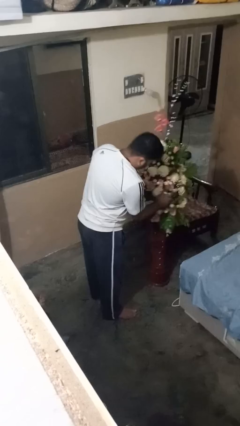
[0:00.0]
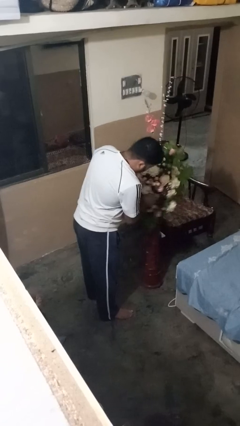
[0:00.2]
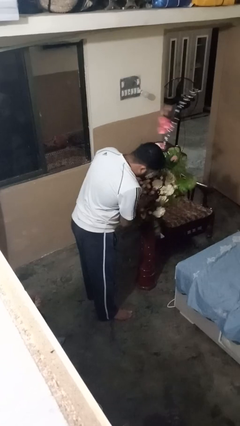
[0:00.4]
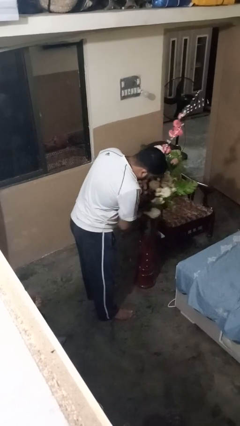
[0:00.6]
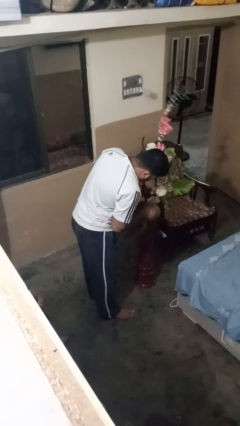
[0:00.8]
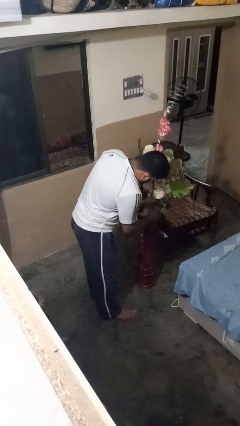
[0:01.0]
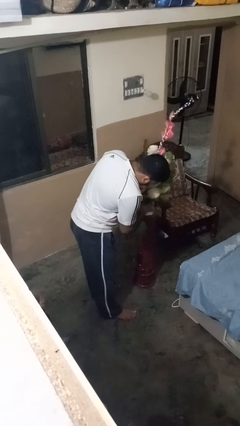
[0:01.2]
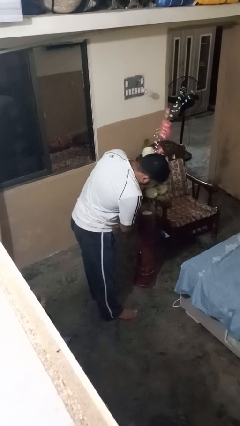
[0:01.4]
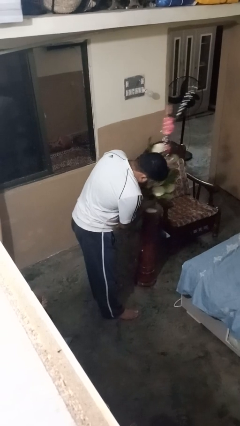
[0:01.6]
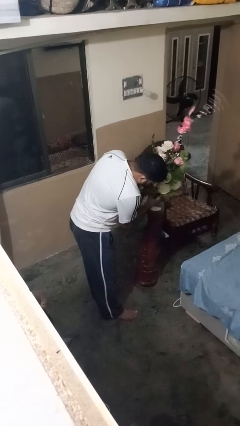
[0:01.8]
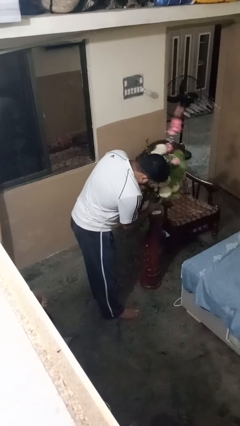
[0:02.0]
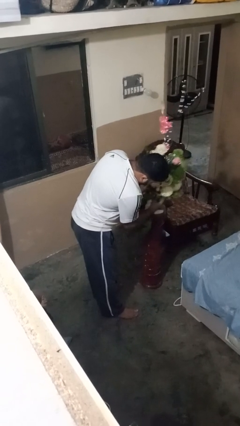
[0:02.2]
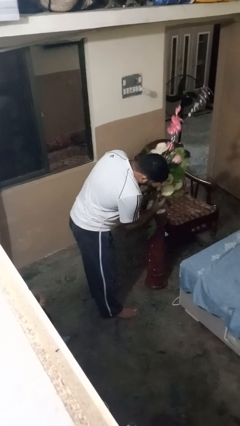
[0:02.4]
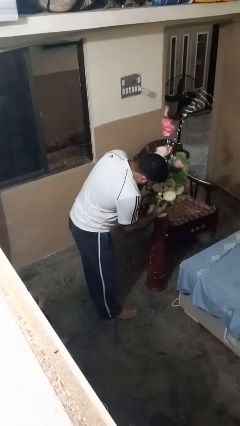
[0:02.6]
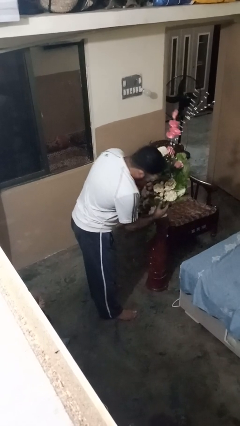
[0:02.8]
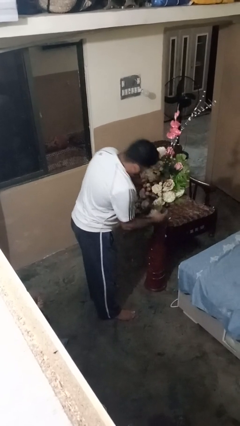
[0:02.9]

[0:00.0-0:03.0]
person arranges flowers in vase

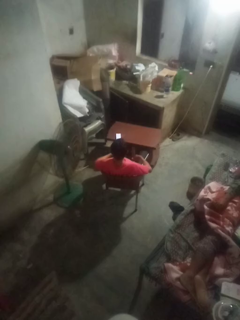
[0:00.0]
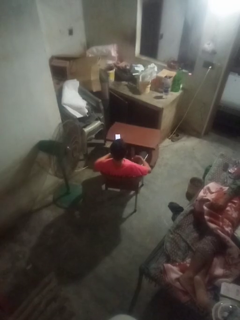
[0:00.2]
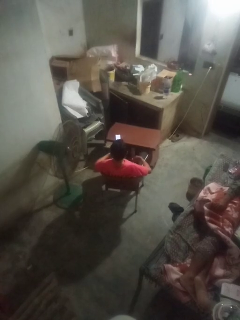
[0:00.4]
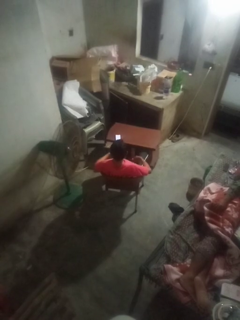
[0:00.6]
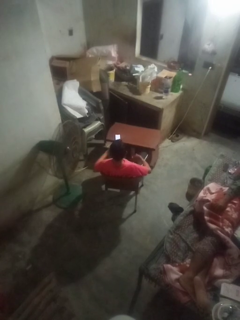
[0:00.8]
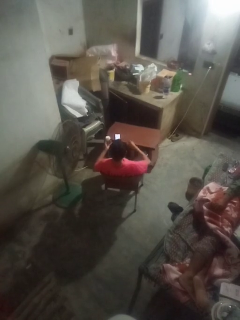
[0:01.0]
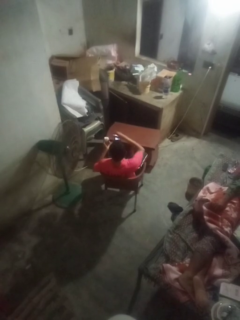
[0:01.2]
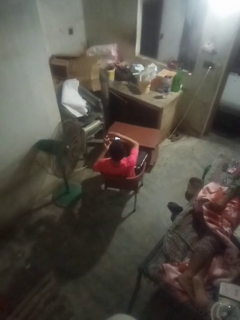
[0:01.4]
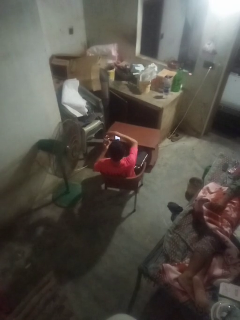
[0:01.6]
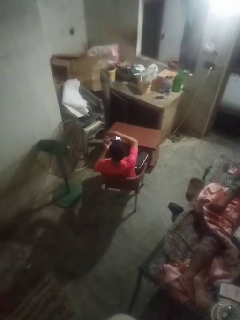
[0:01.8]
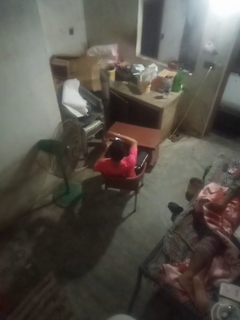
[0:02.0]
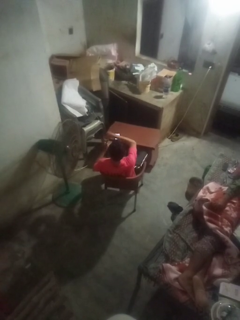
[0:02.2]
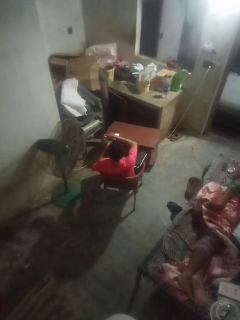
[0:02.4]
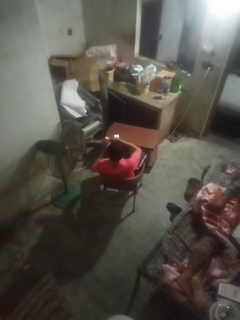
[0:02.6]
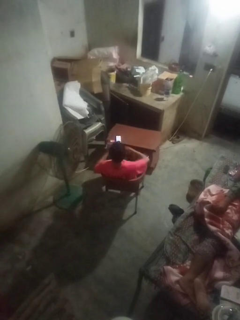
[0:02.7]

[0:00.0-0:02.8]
person closes jar

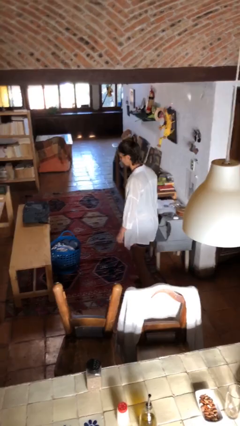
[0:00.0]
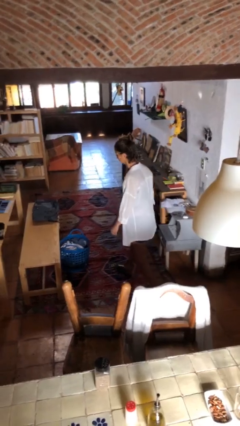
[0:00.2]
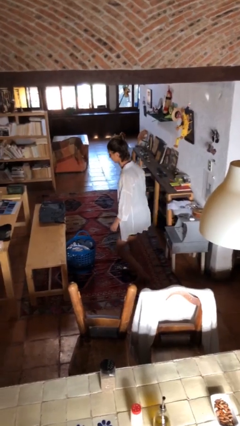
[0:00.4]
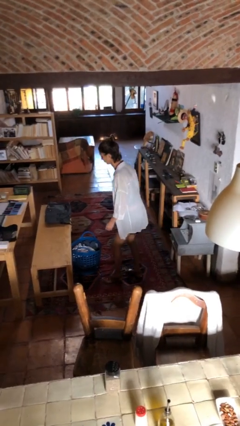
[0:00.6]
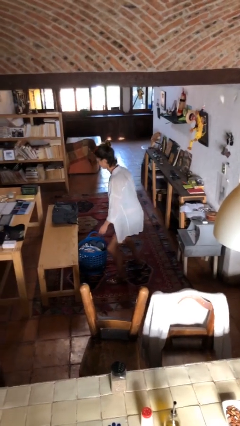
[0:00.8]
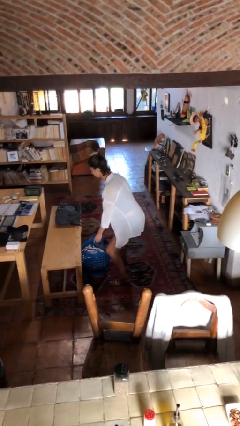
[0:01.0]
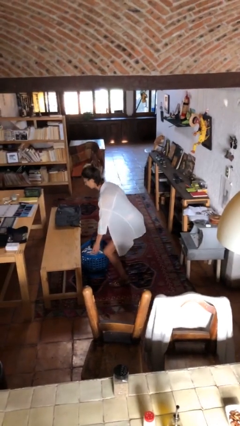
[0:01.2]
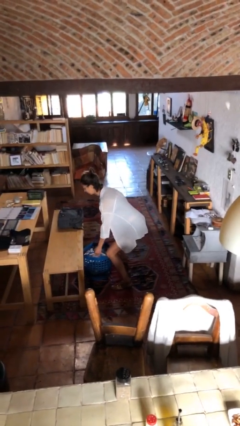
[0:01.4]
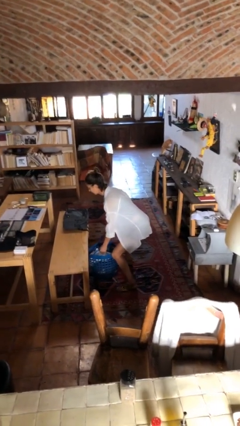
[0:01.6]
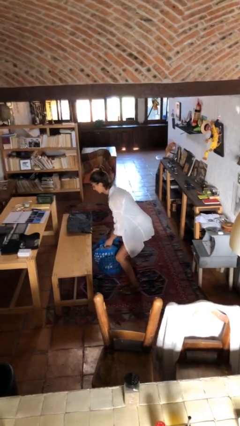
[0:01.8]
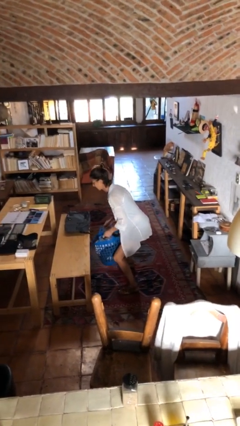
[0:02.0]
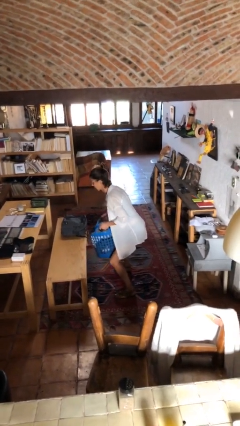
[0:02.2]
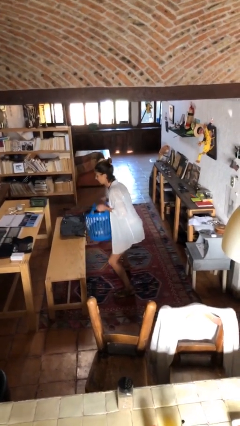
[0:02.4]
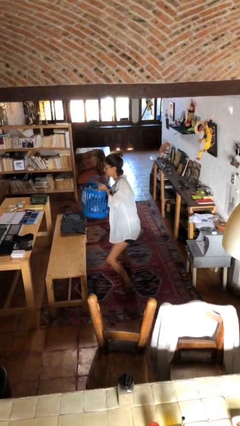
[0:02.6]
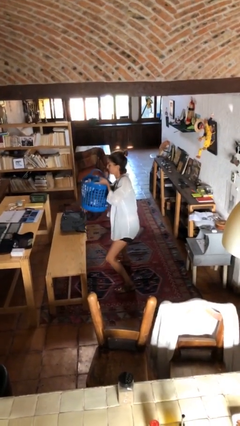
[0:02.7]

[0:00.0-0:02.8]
person picks up object from floor

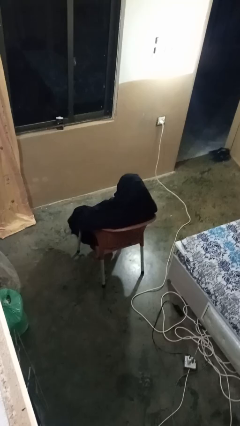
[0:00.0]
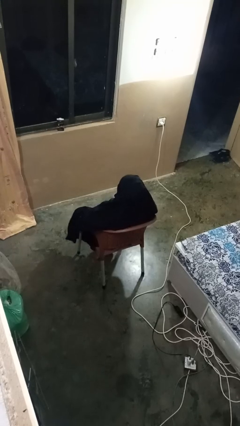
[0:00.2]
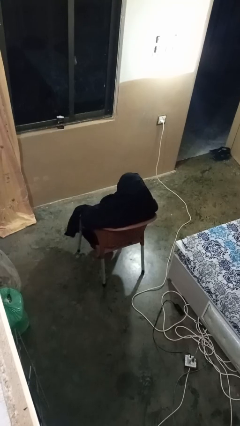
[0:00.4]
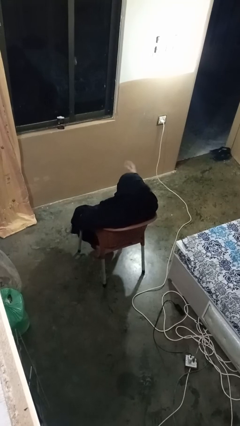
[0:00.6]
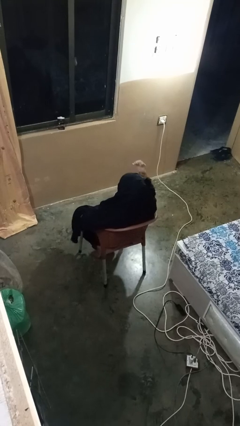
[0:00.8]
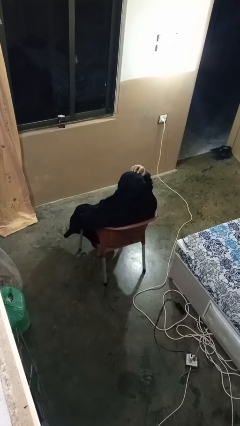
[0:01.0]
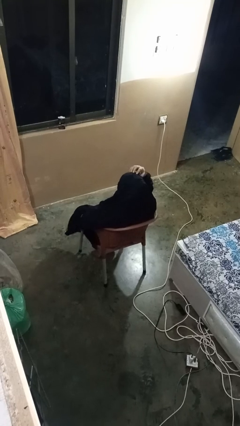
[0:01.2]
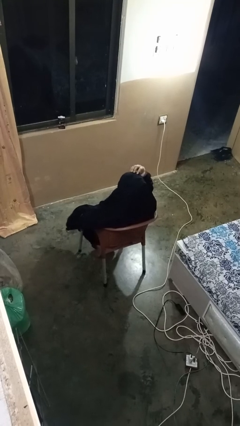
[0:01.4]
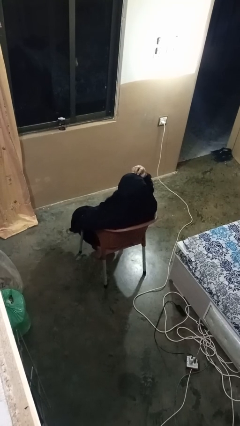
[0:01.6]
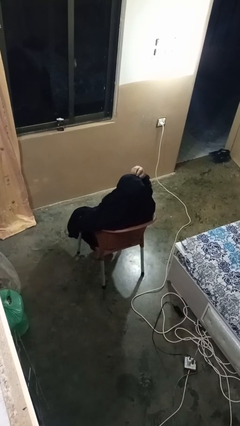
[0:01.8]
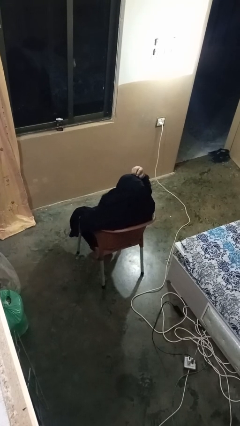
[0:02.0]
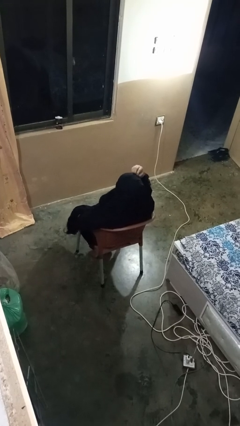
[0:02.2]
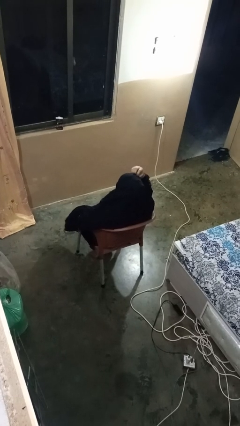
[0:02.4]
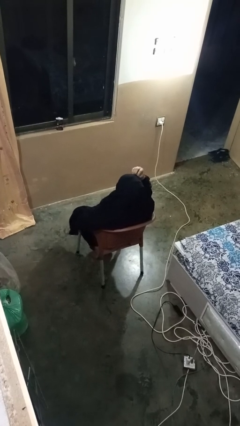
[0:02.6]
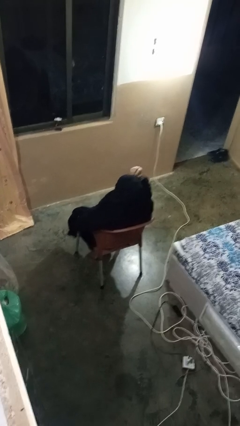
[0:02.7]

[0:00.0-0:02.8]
person scratches face

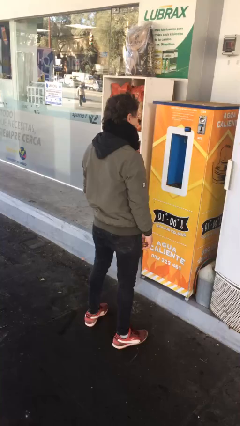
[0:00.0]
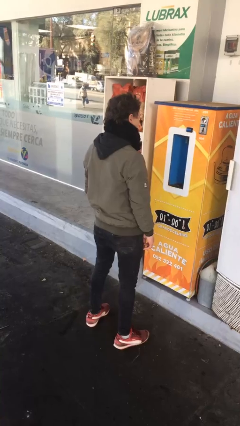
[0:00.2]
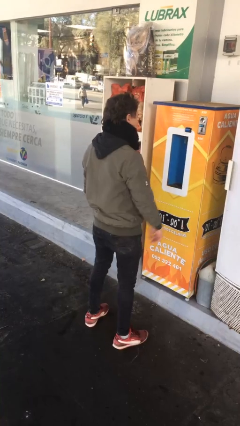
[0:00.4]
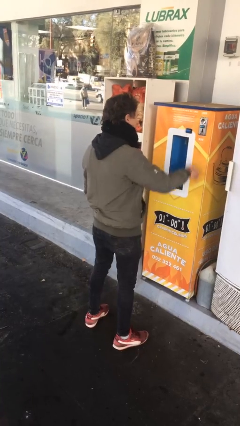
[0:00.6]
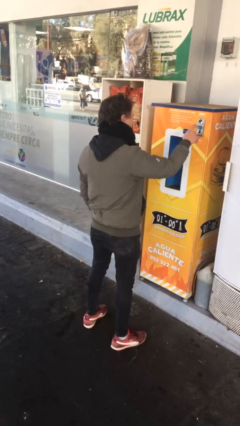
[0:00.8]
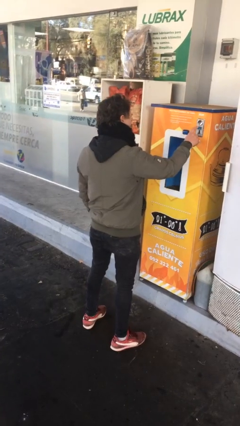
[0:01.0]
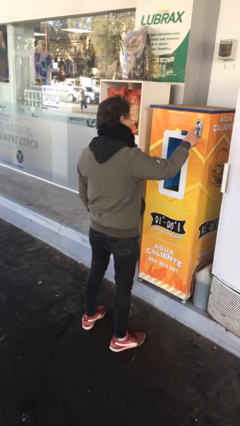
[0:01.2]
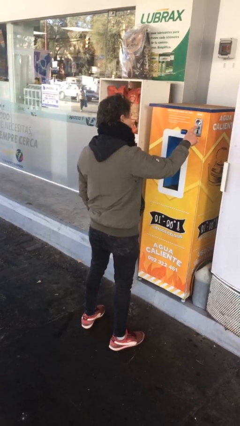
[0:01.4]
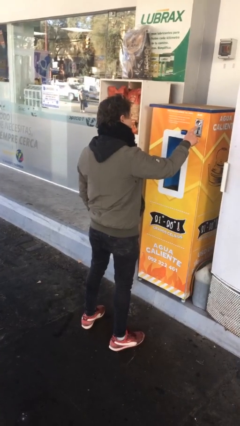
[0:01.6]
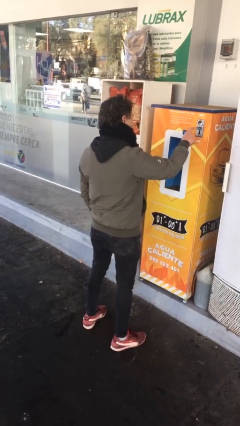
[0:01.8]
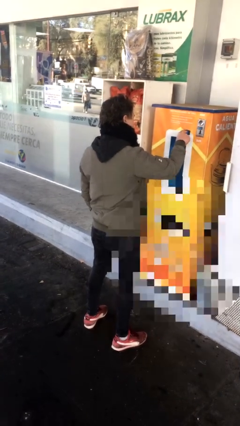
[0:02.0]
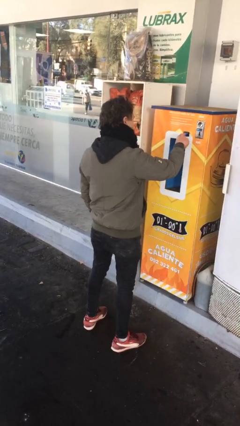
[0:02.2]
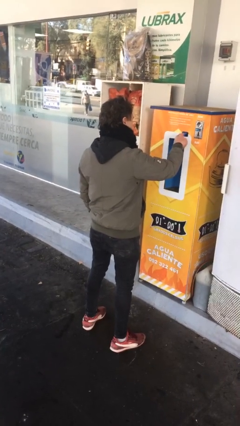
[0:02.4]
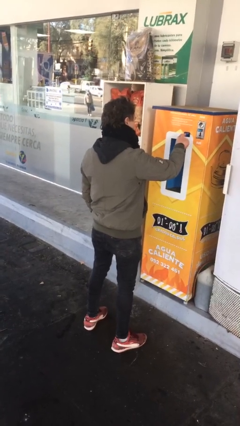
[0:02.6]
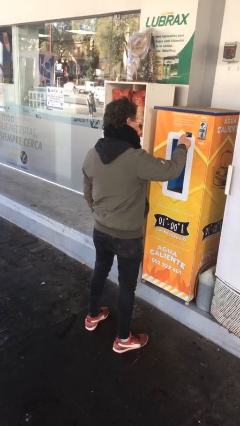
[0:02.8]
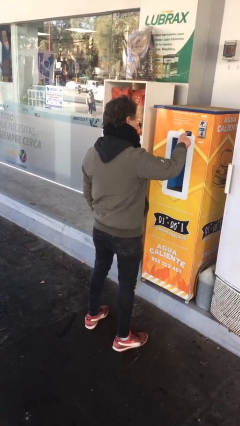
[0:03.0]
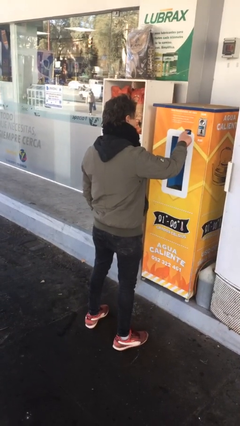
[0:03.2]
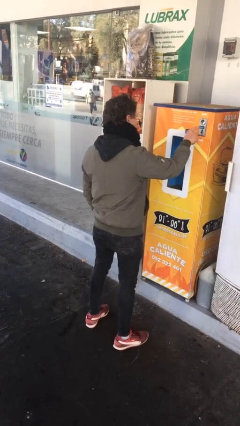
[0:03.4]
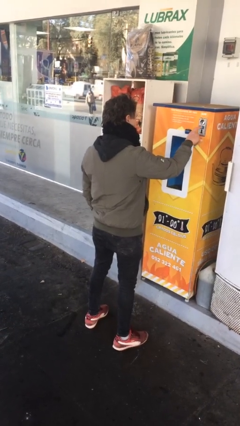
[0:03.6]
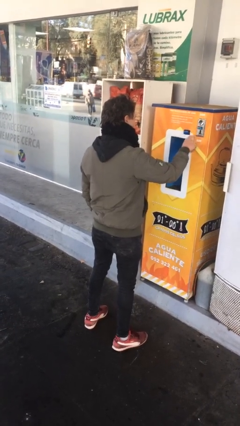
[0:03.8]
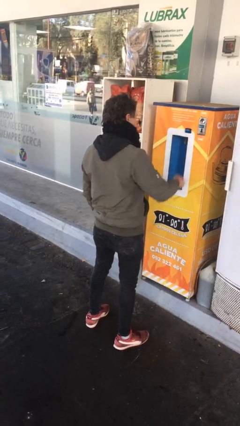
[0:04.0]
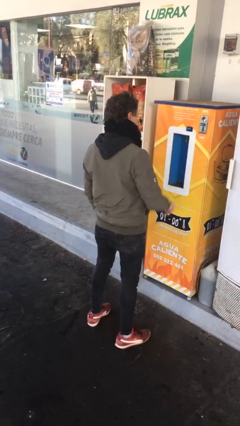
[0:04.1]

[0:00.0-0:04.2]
person purchases from machine

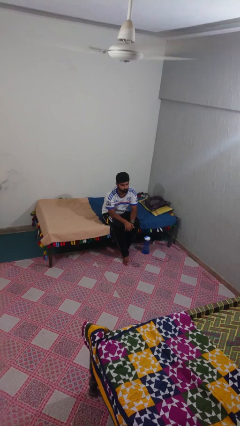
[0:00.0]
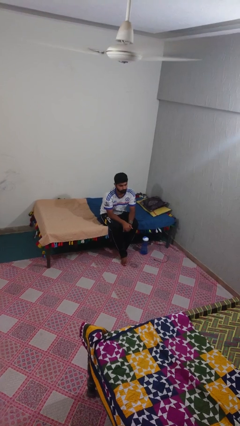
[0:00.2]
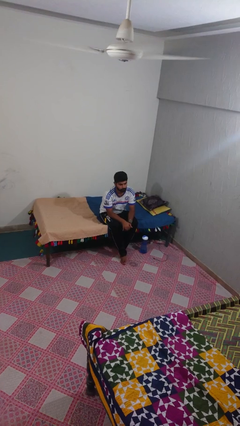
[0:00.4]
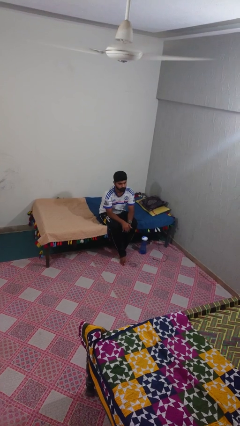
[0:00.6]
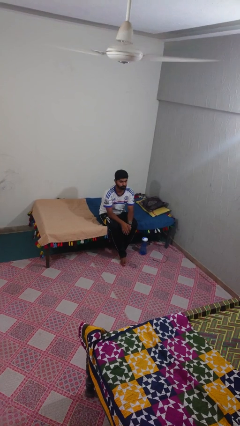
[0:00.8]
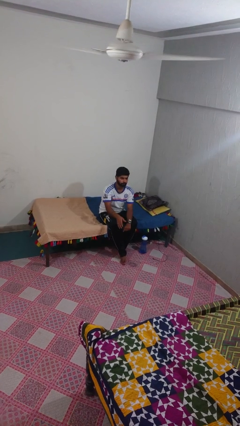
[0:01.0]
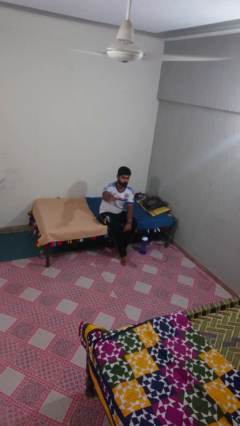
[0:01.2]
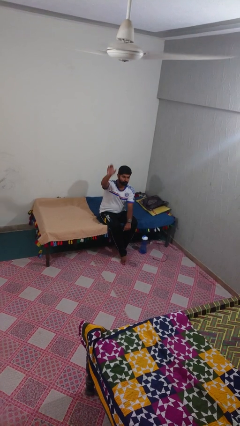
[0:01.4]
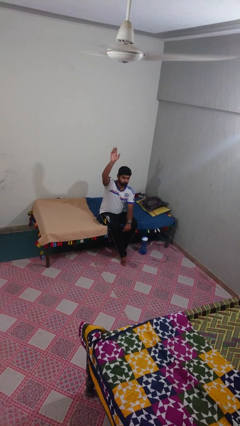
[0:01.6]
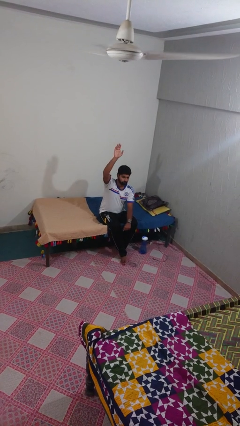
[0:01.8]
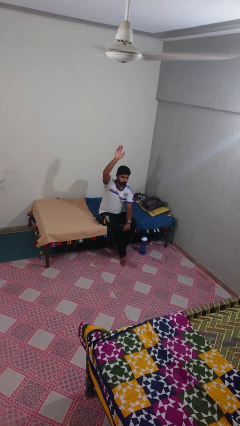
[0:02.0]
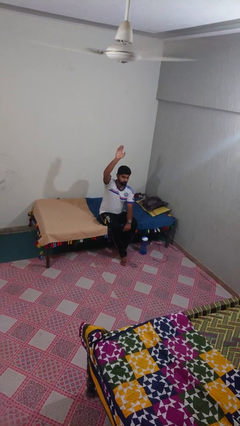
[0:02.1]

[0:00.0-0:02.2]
person gestures raise hand

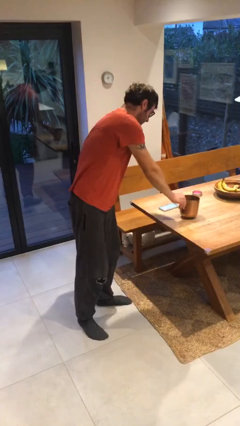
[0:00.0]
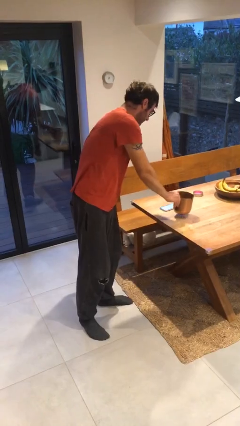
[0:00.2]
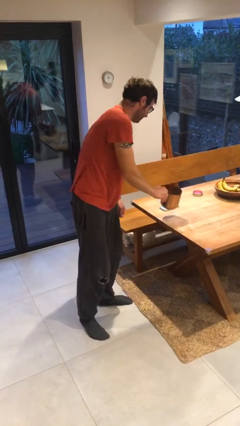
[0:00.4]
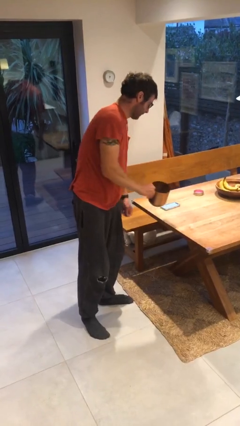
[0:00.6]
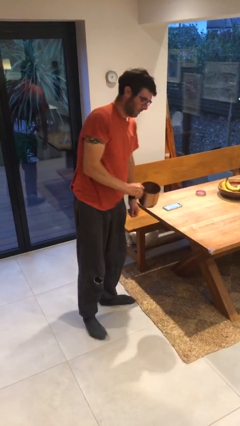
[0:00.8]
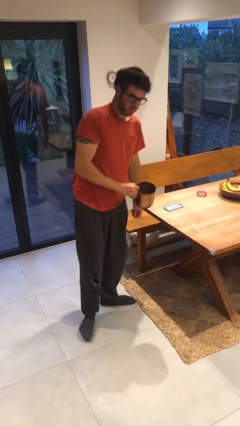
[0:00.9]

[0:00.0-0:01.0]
person picks up object from table
